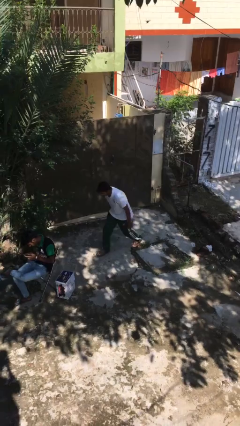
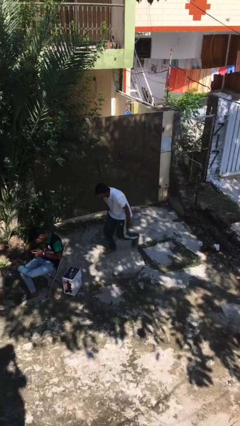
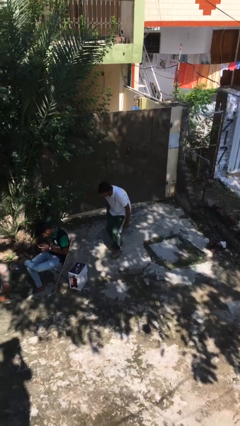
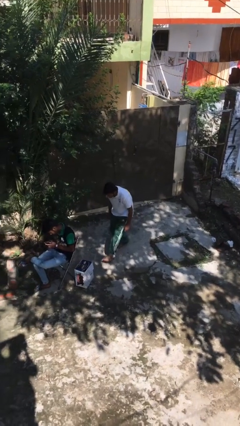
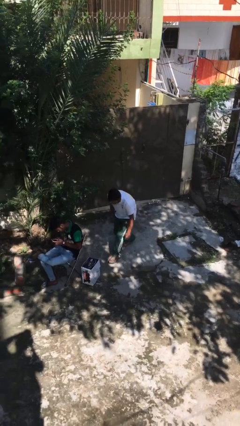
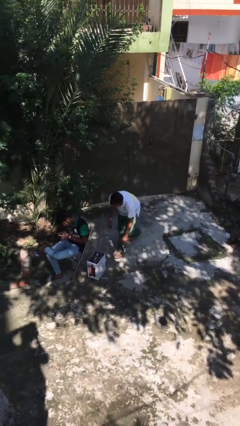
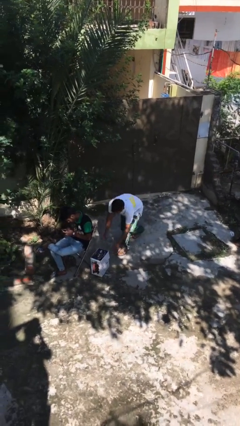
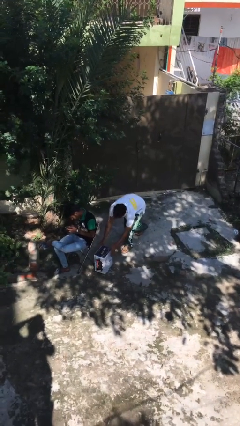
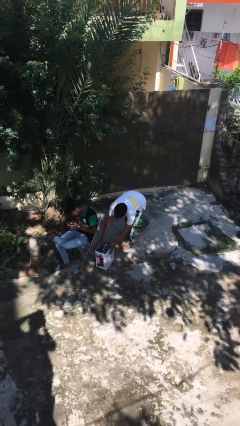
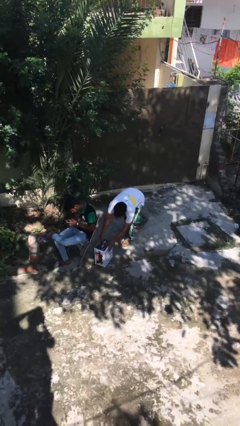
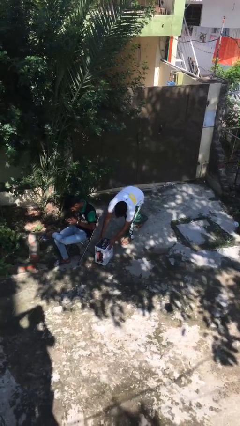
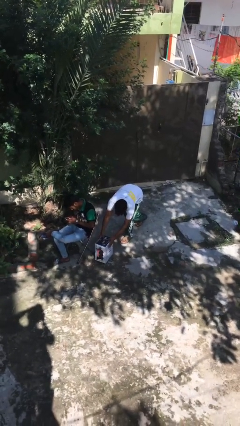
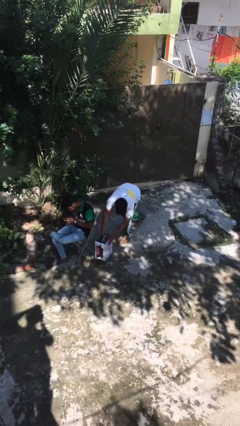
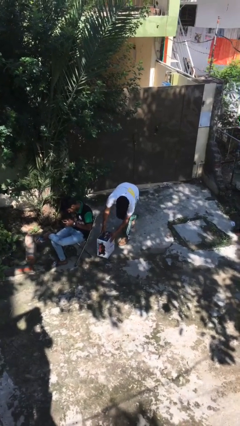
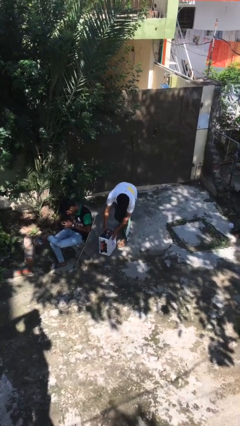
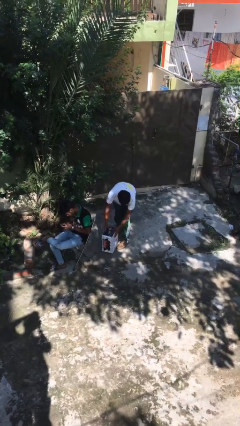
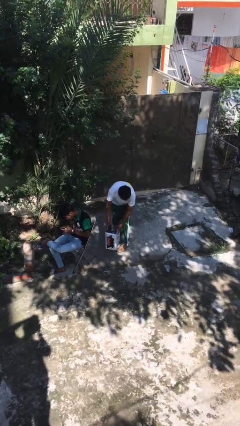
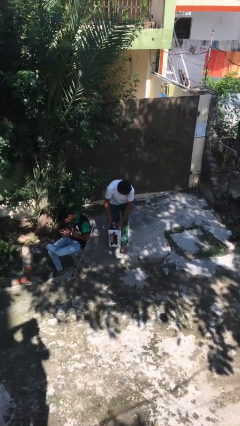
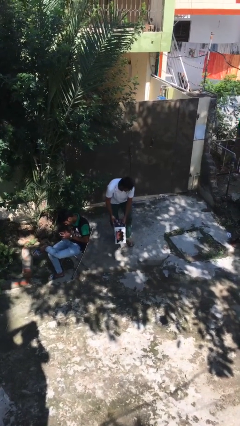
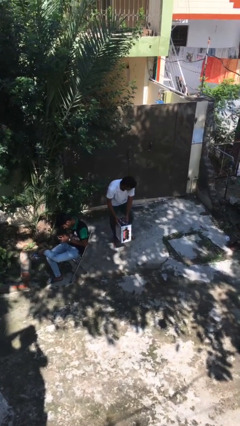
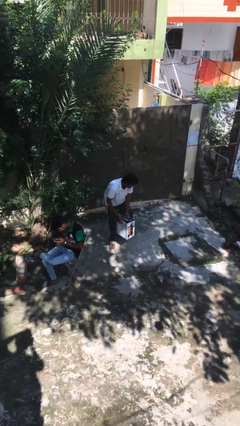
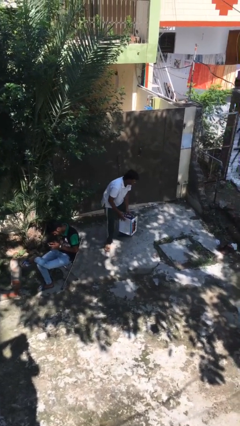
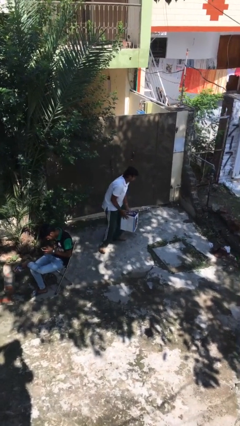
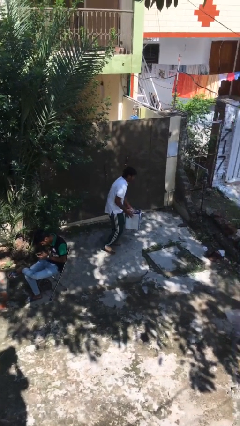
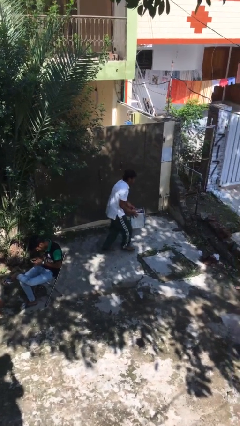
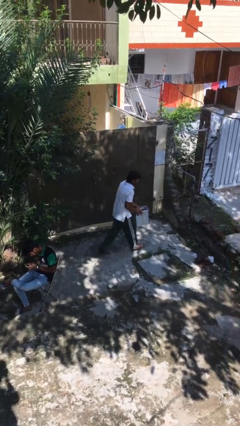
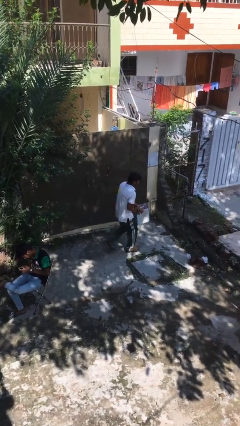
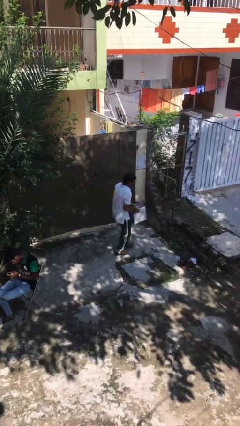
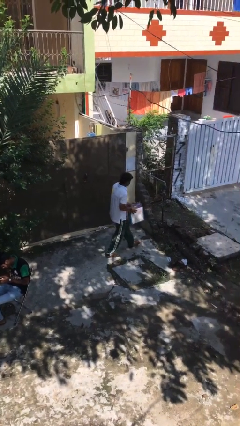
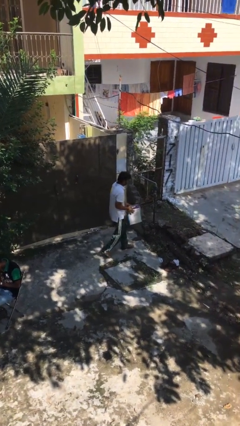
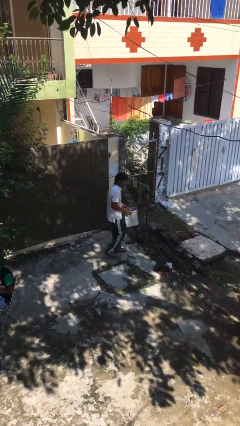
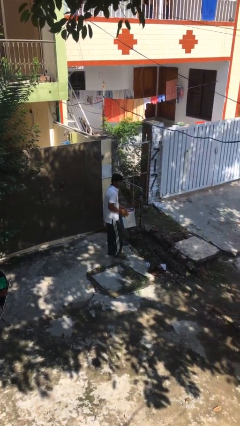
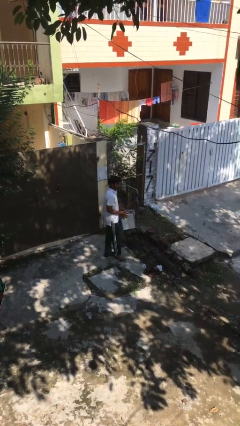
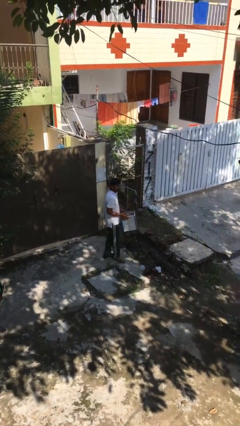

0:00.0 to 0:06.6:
person steals object from person

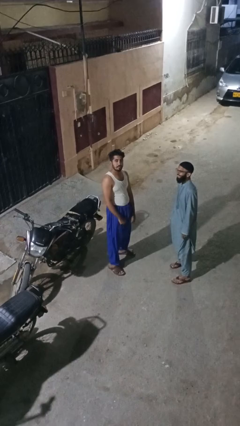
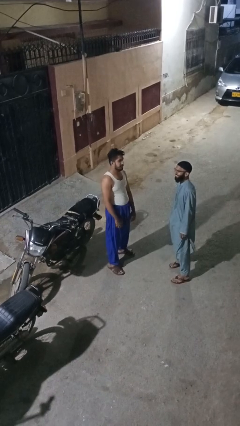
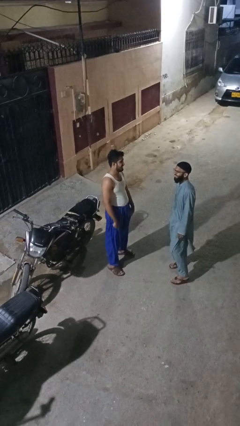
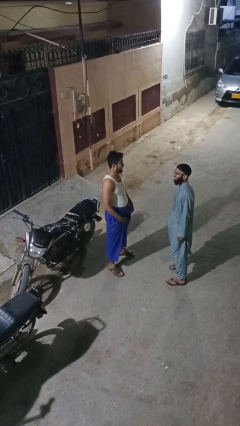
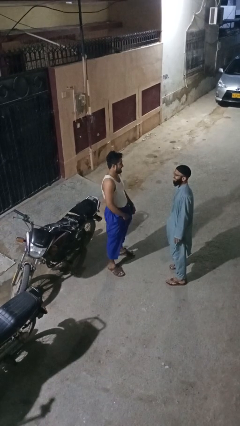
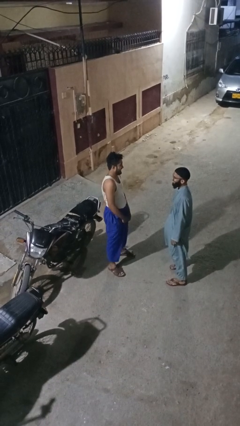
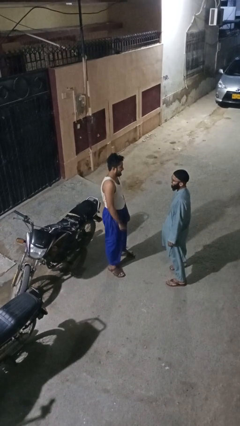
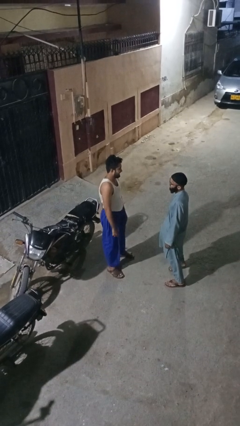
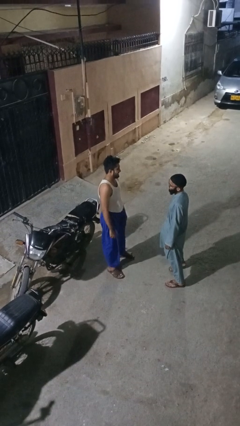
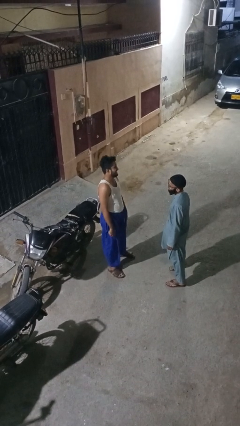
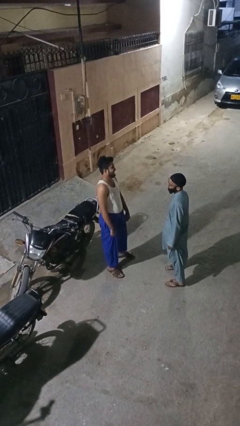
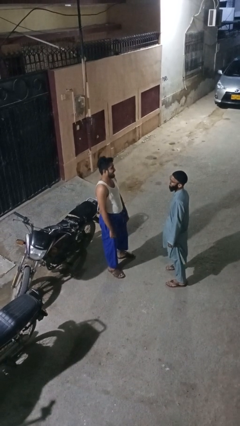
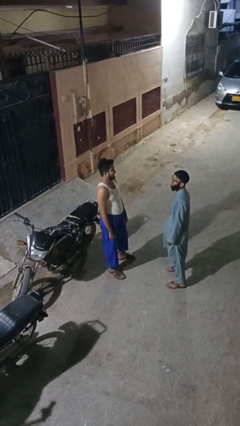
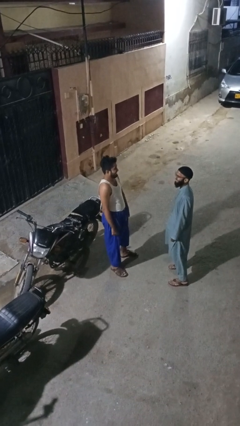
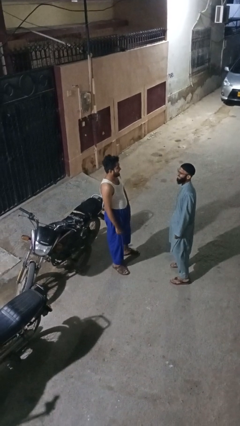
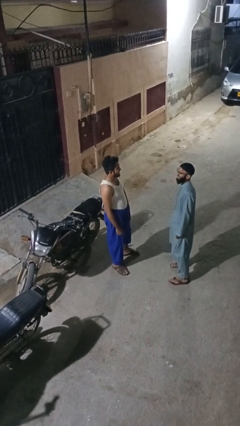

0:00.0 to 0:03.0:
person laughs with person

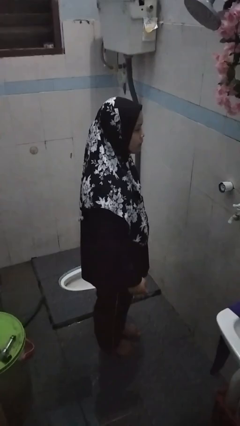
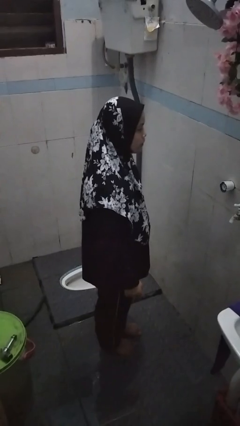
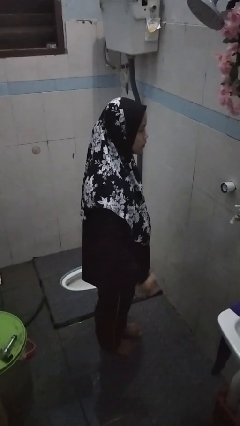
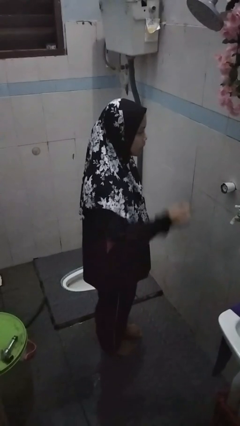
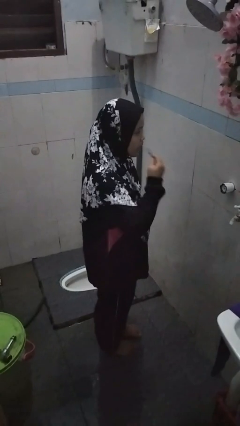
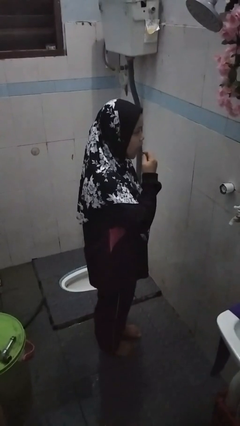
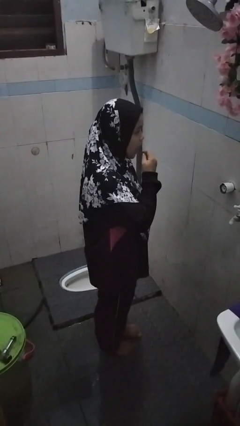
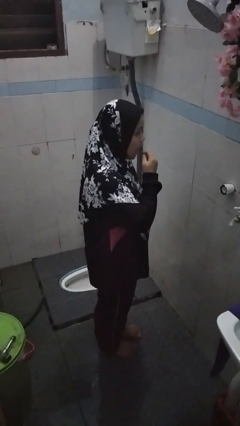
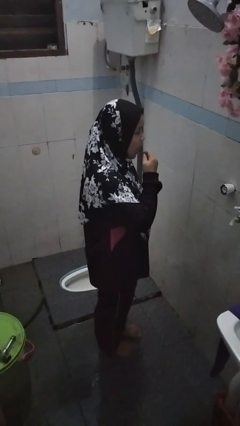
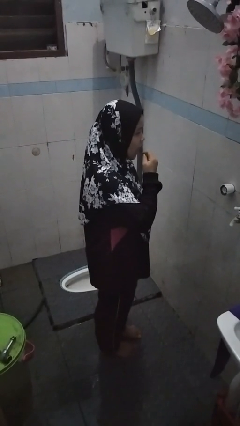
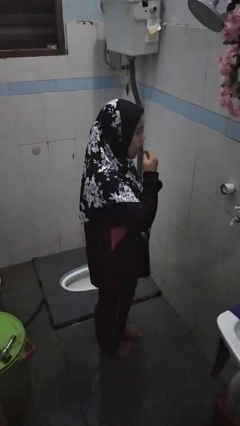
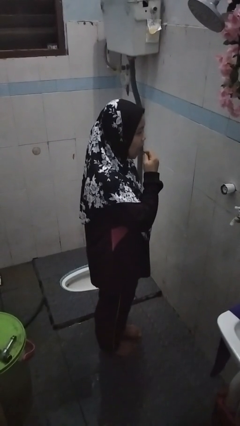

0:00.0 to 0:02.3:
person flosses

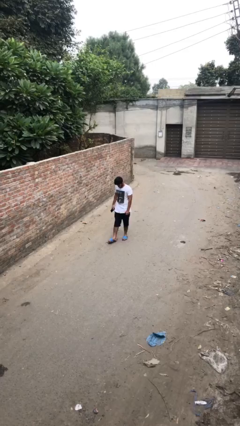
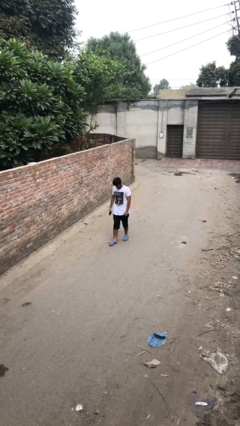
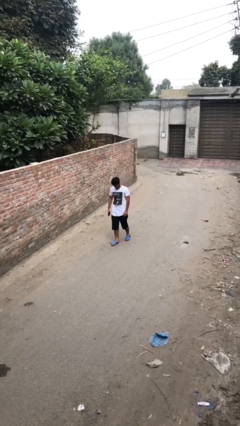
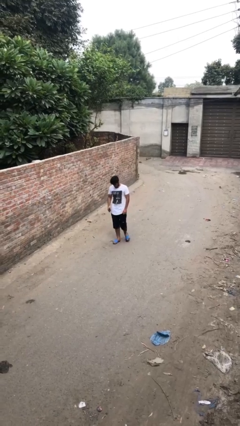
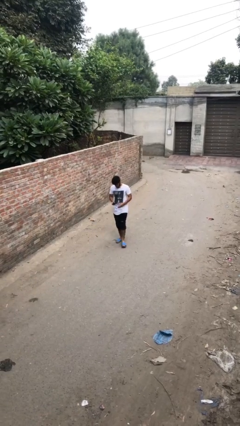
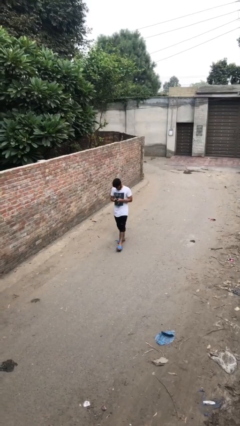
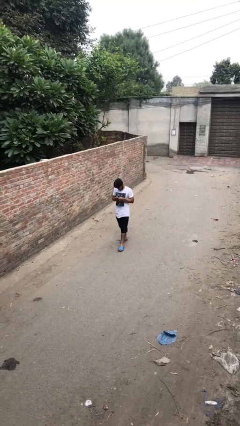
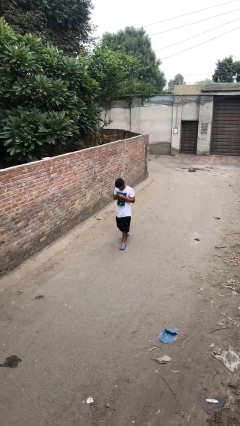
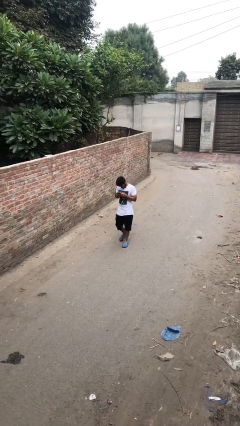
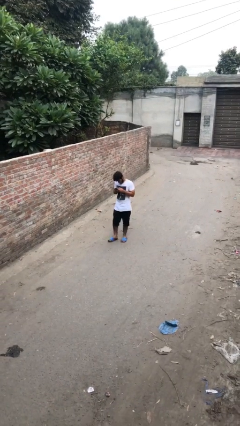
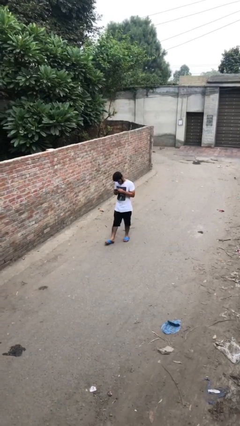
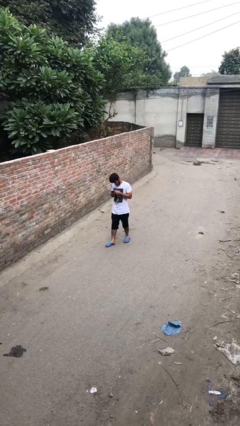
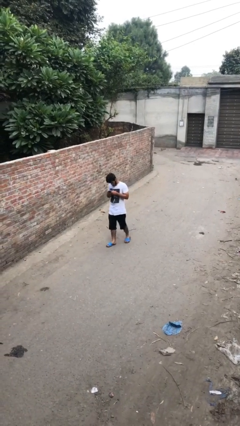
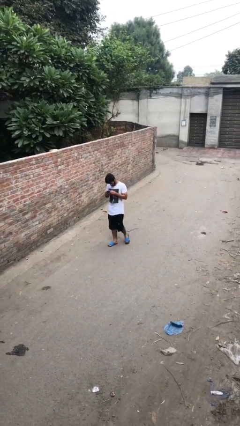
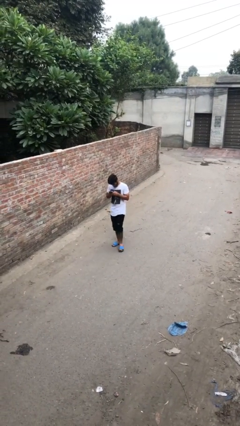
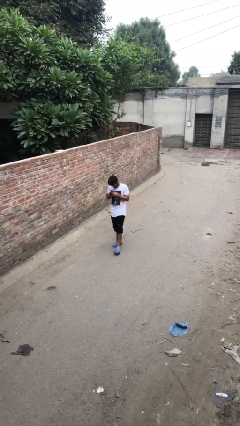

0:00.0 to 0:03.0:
person texts on phone

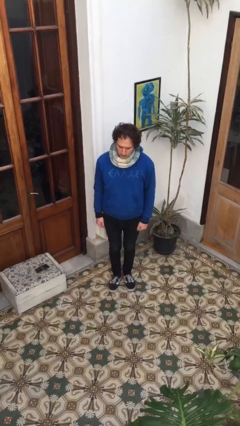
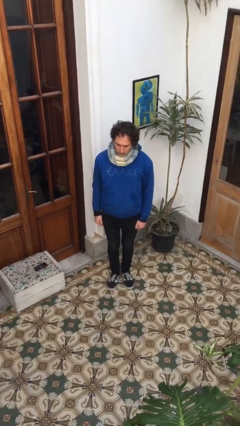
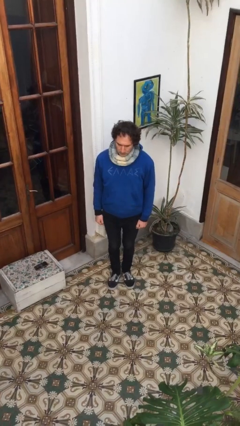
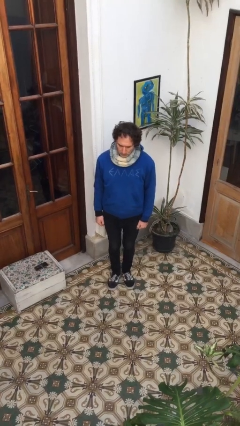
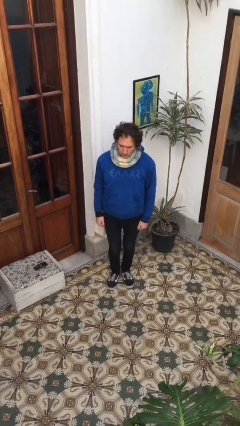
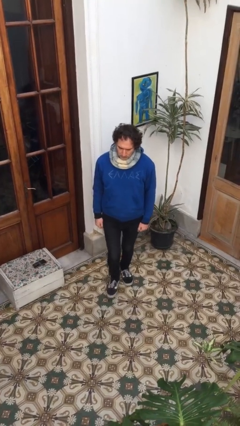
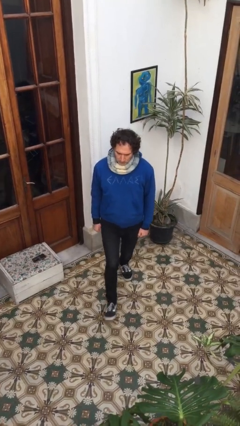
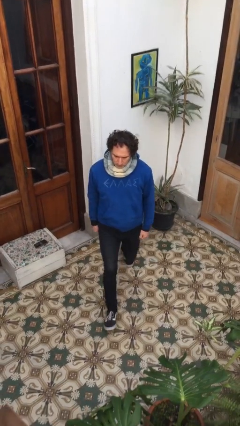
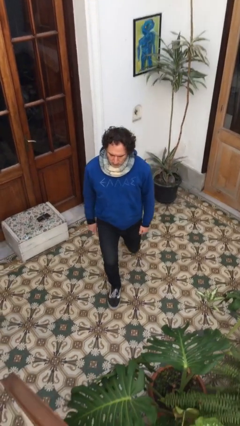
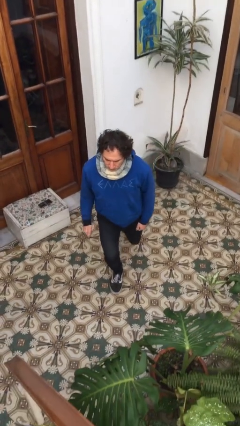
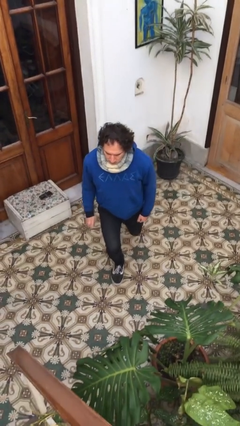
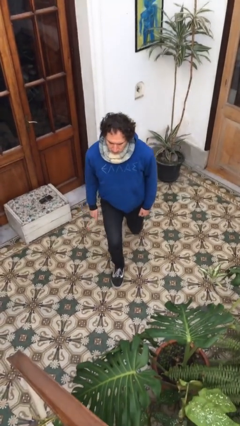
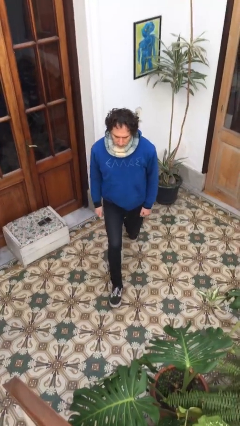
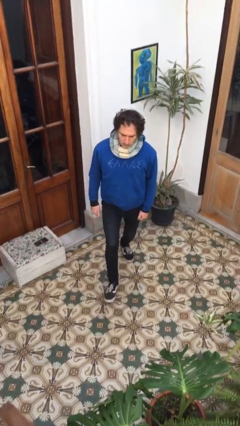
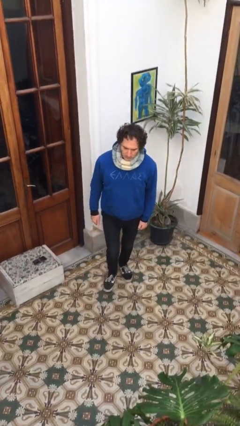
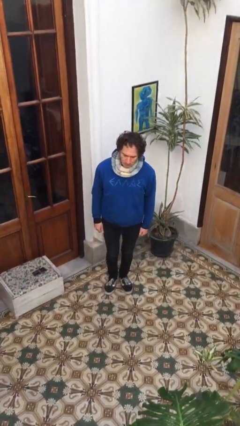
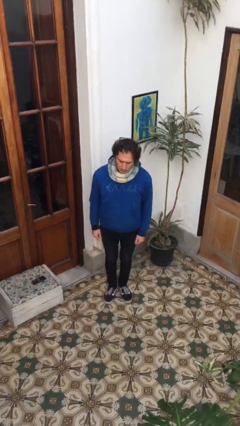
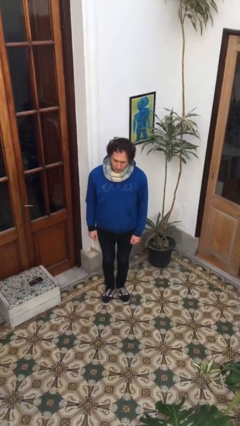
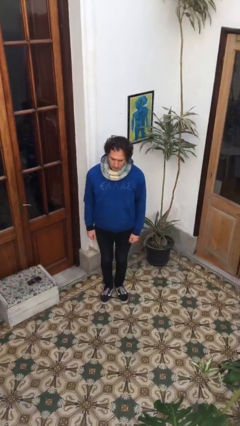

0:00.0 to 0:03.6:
person exercises with lunges
